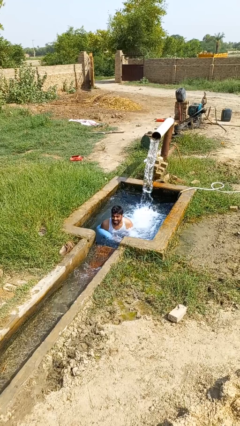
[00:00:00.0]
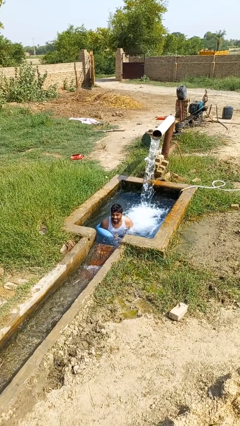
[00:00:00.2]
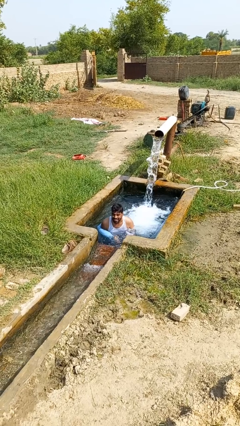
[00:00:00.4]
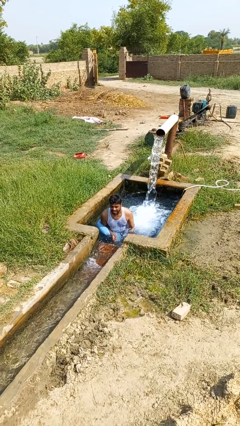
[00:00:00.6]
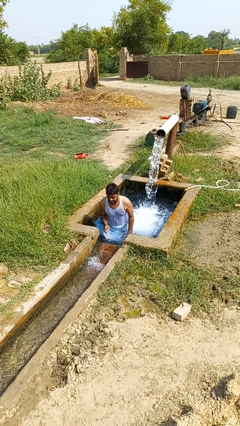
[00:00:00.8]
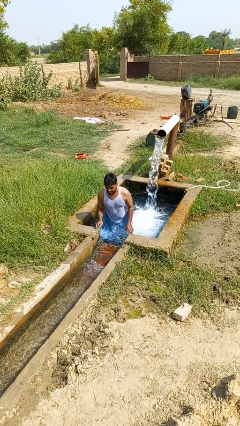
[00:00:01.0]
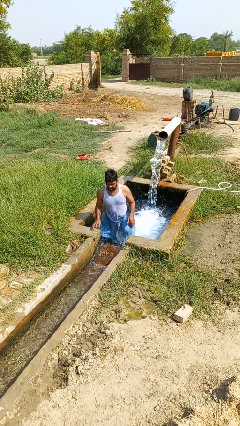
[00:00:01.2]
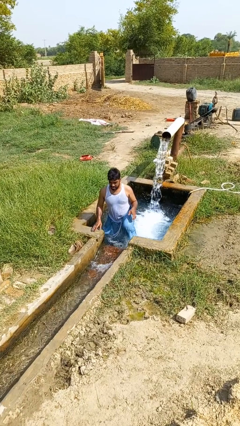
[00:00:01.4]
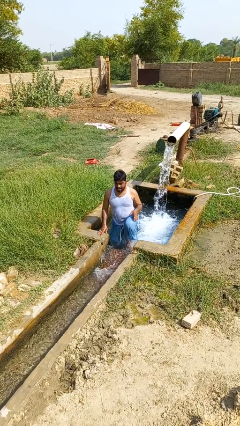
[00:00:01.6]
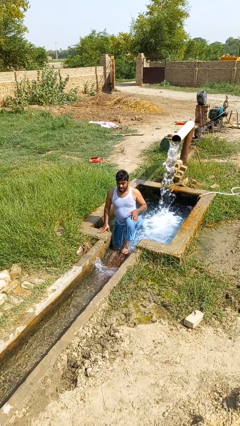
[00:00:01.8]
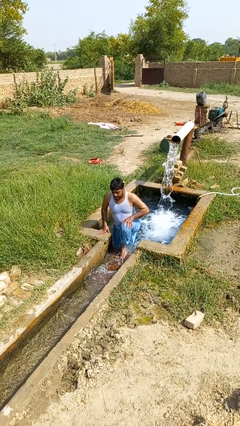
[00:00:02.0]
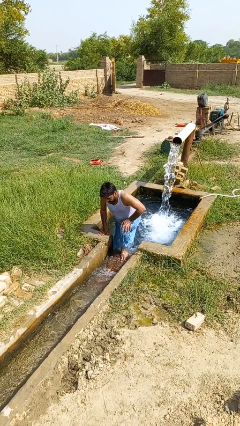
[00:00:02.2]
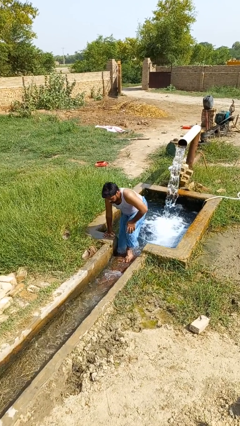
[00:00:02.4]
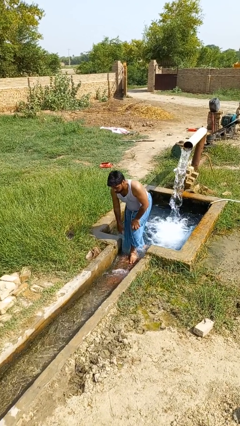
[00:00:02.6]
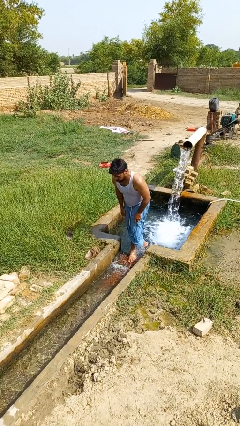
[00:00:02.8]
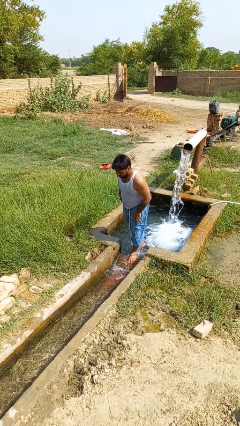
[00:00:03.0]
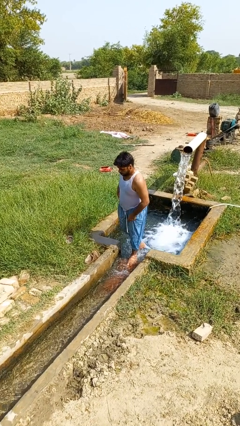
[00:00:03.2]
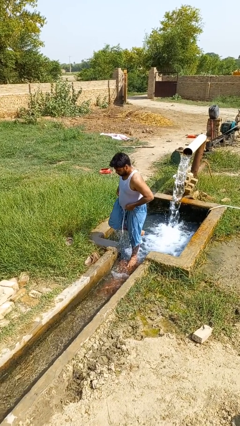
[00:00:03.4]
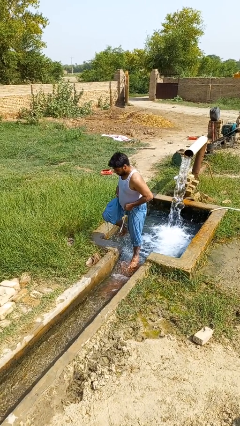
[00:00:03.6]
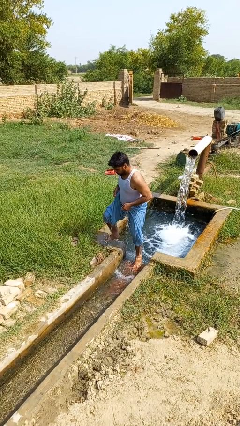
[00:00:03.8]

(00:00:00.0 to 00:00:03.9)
person exits pool

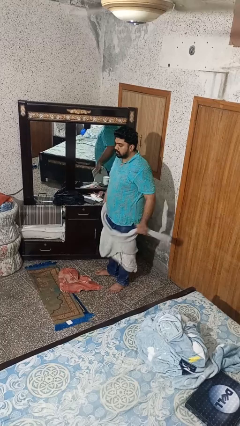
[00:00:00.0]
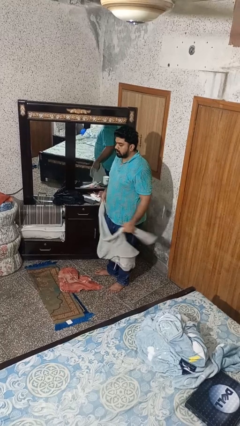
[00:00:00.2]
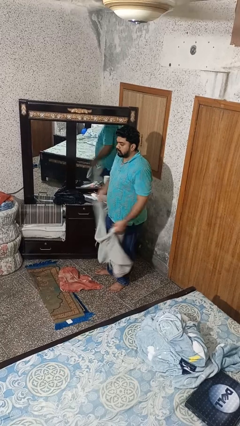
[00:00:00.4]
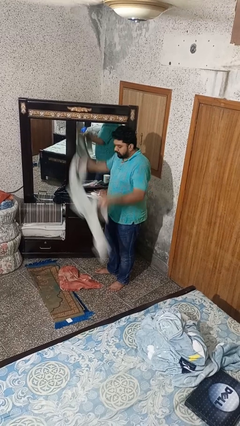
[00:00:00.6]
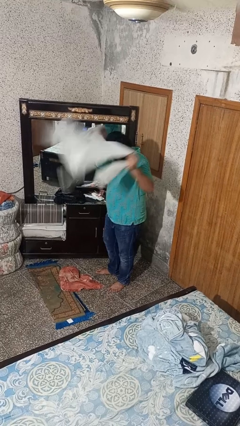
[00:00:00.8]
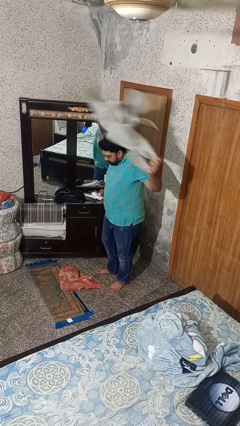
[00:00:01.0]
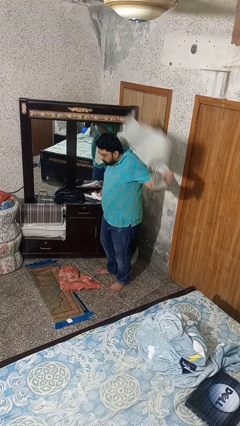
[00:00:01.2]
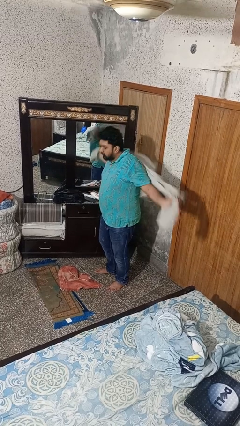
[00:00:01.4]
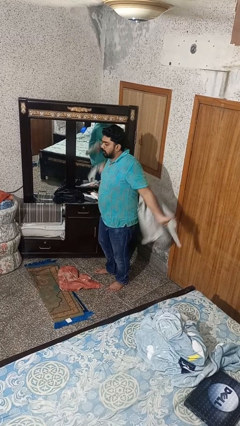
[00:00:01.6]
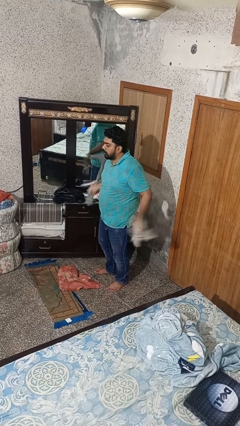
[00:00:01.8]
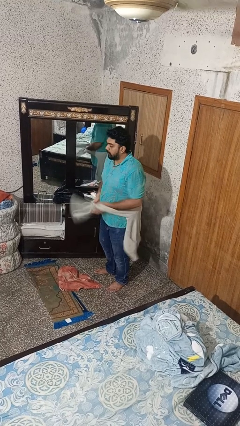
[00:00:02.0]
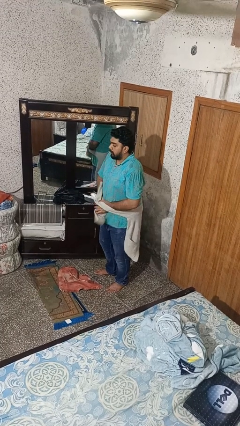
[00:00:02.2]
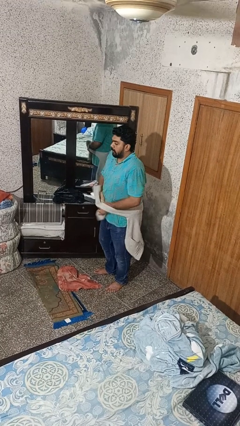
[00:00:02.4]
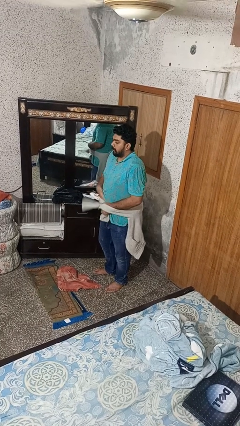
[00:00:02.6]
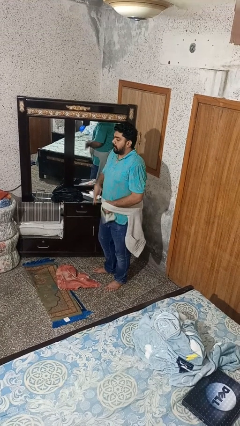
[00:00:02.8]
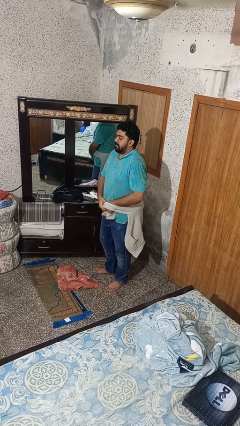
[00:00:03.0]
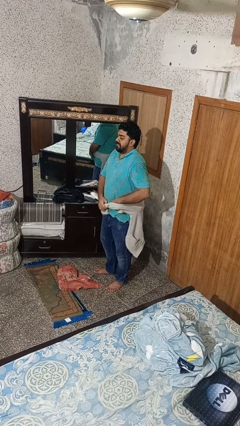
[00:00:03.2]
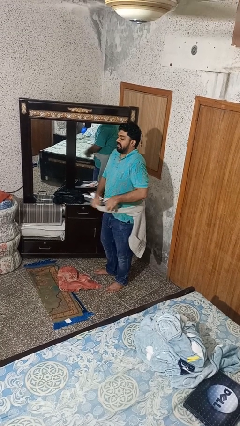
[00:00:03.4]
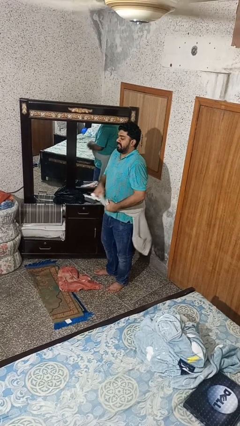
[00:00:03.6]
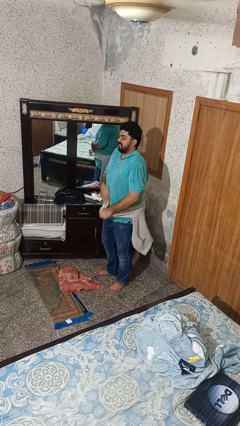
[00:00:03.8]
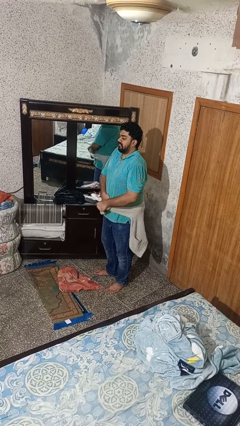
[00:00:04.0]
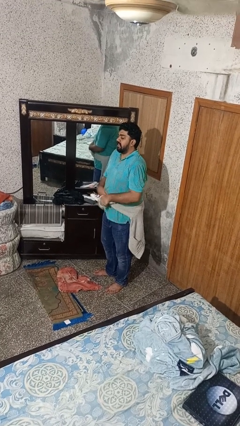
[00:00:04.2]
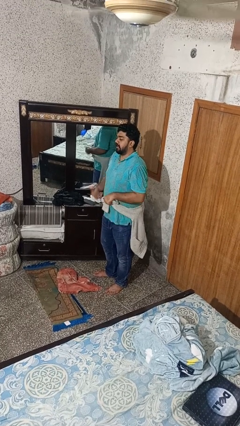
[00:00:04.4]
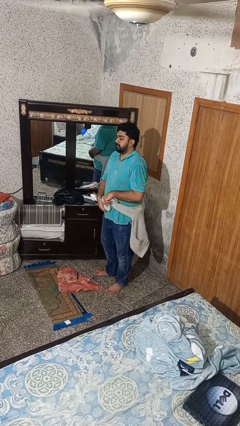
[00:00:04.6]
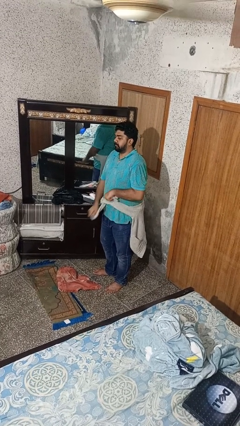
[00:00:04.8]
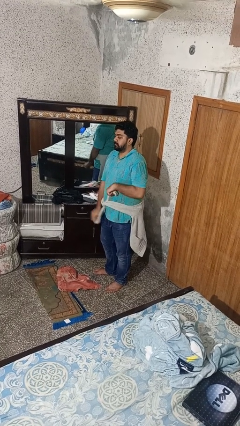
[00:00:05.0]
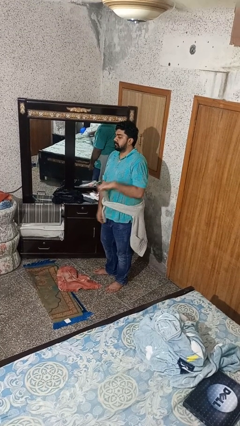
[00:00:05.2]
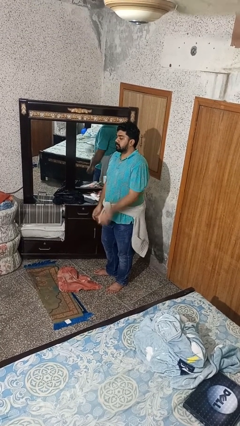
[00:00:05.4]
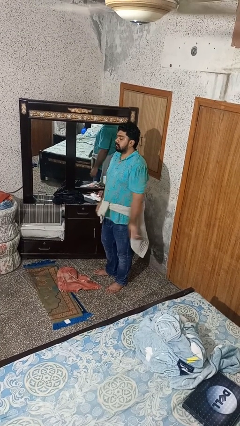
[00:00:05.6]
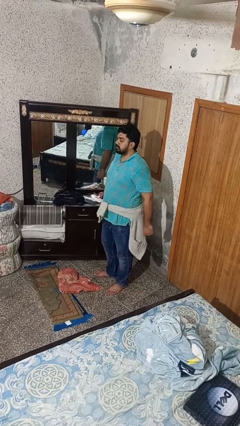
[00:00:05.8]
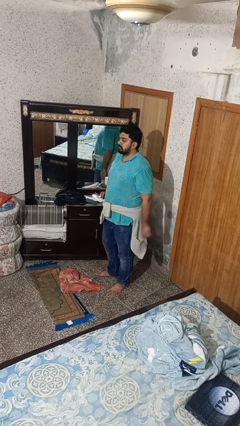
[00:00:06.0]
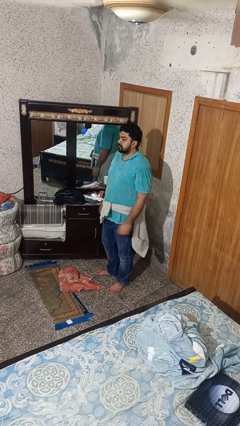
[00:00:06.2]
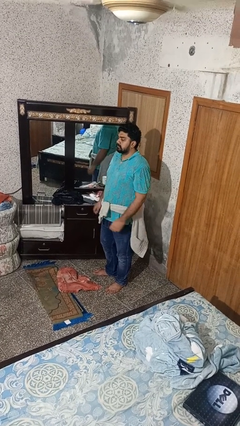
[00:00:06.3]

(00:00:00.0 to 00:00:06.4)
person ties jacket around waist

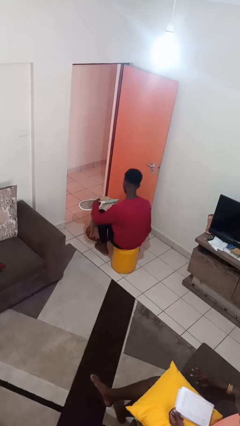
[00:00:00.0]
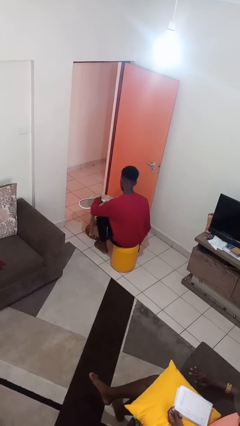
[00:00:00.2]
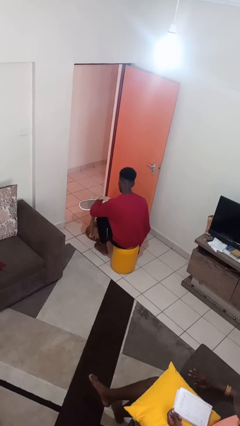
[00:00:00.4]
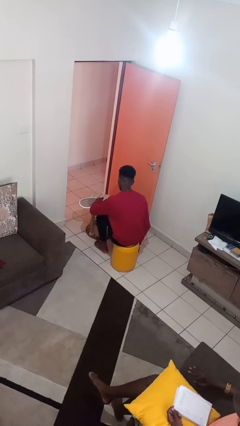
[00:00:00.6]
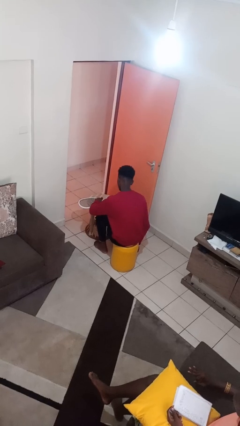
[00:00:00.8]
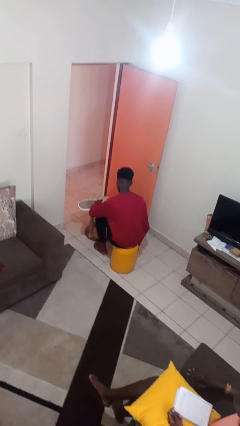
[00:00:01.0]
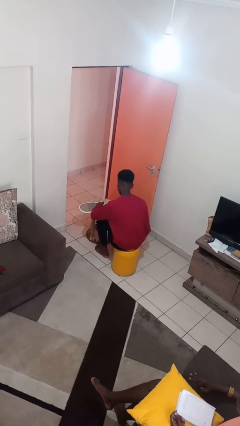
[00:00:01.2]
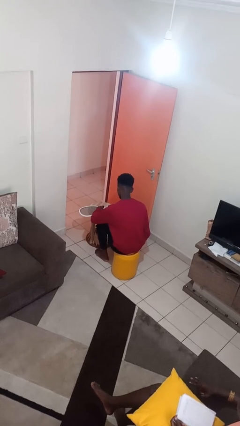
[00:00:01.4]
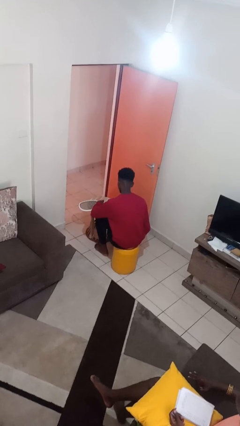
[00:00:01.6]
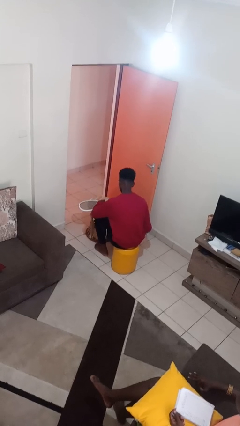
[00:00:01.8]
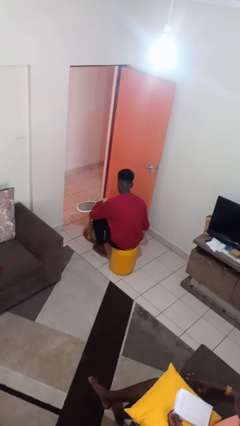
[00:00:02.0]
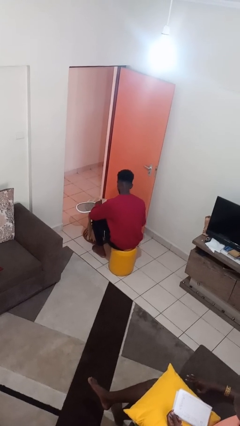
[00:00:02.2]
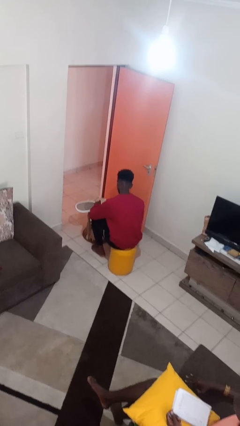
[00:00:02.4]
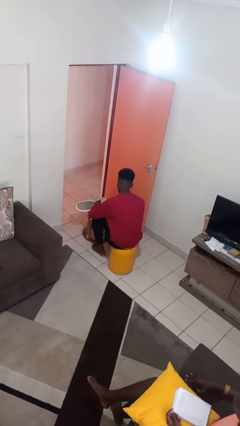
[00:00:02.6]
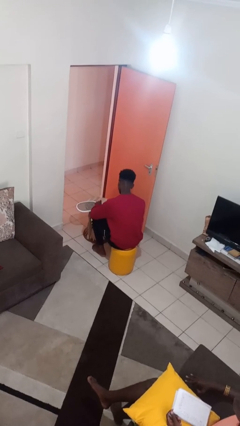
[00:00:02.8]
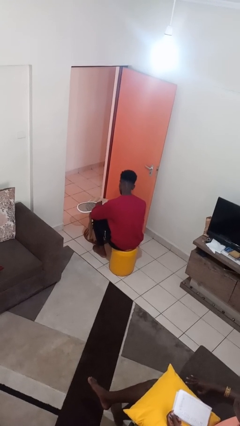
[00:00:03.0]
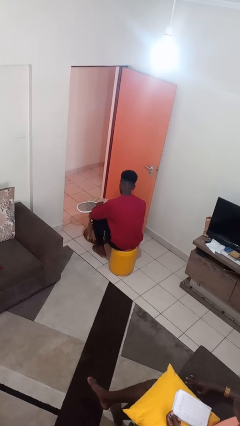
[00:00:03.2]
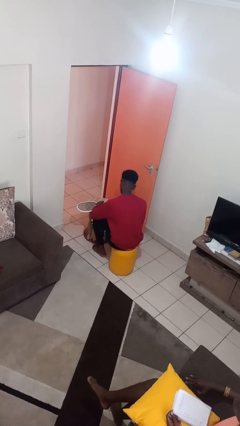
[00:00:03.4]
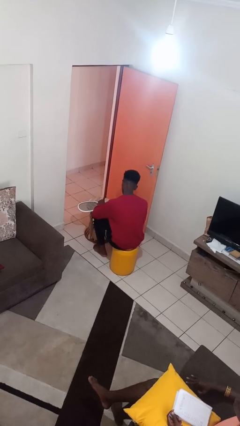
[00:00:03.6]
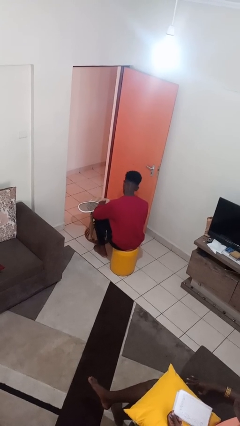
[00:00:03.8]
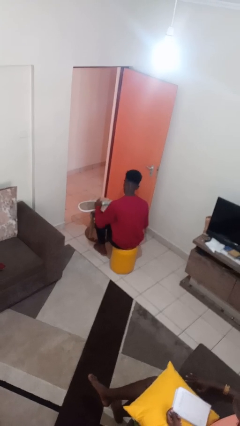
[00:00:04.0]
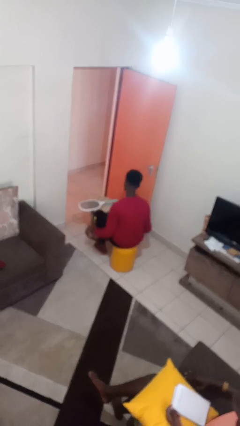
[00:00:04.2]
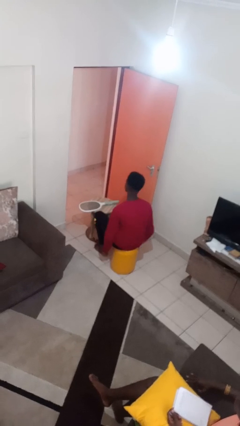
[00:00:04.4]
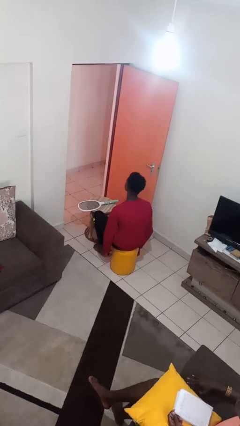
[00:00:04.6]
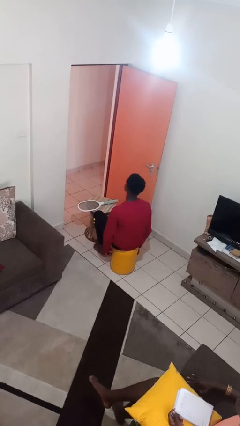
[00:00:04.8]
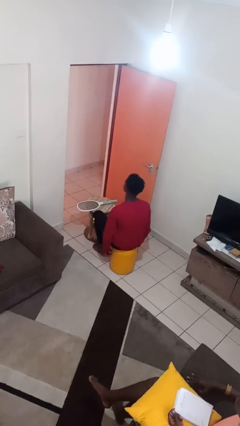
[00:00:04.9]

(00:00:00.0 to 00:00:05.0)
person taps object with finger

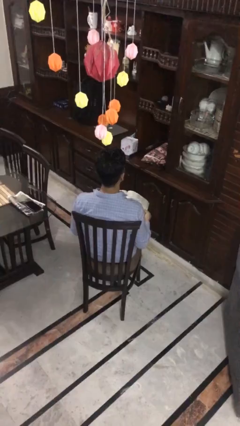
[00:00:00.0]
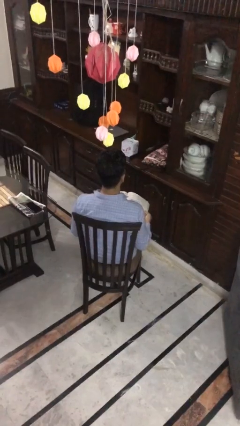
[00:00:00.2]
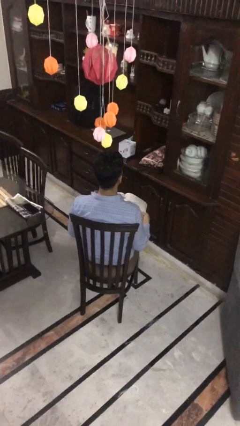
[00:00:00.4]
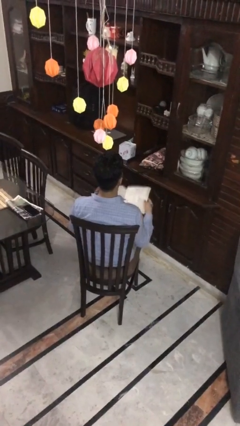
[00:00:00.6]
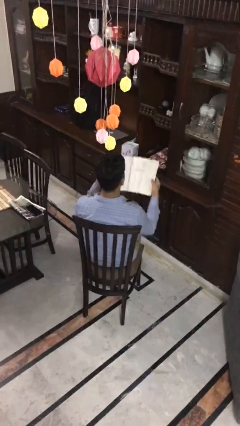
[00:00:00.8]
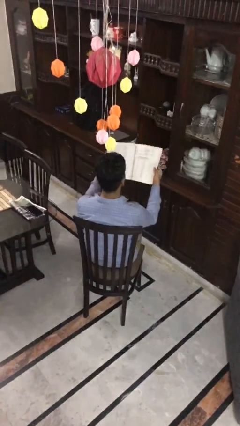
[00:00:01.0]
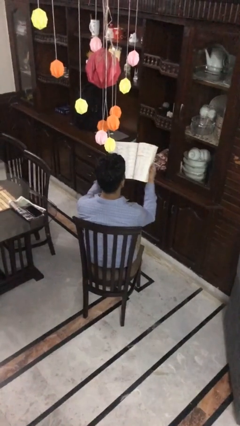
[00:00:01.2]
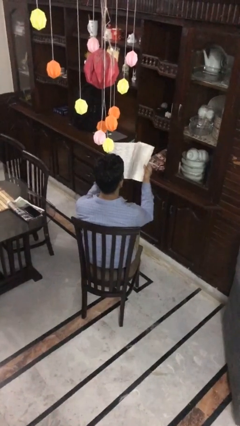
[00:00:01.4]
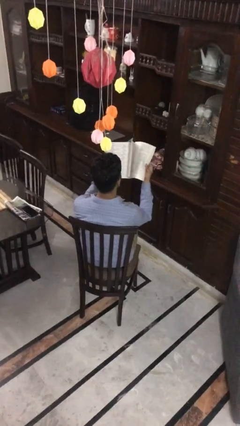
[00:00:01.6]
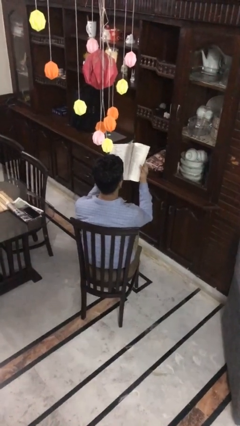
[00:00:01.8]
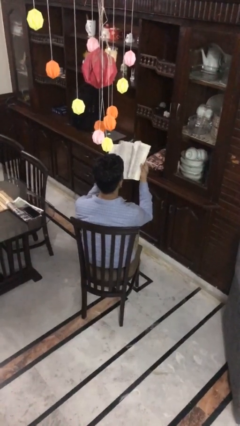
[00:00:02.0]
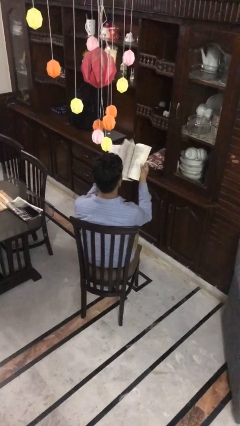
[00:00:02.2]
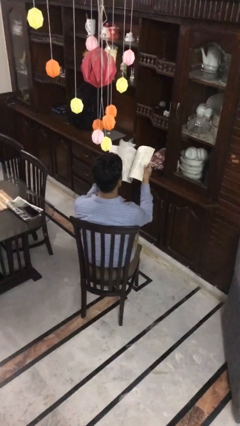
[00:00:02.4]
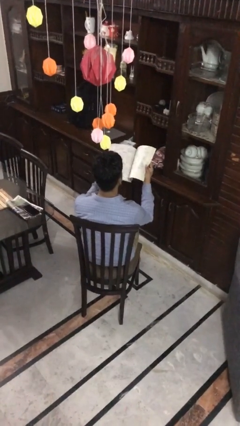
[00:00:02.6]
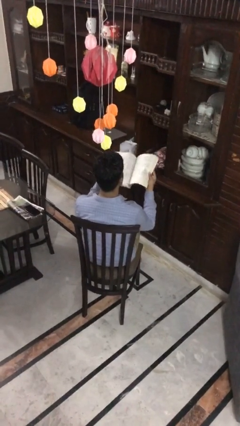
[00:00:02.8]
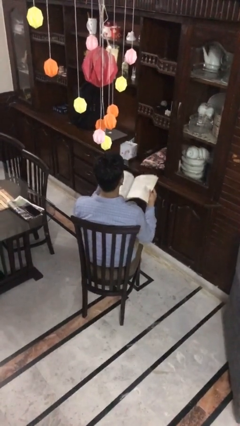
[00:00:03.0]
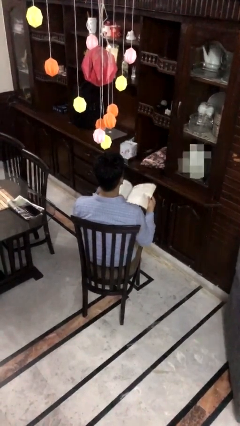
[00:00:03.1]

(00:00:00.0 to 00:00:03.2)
person reads magazine
